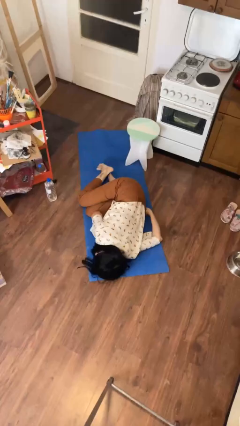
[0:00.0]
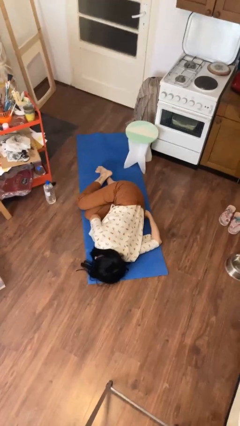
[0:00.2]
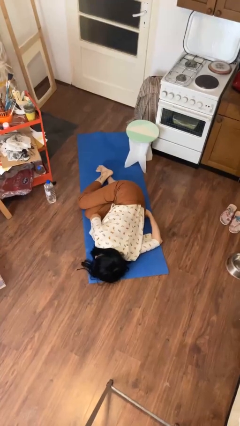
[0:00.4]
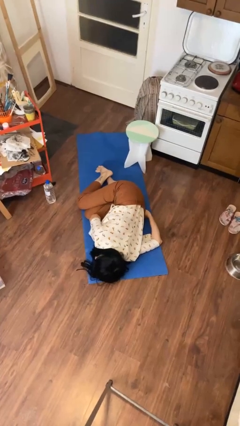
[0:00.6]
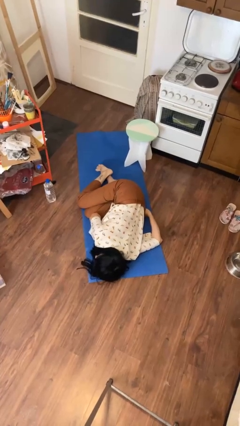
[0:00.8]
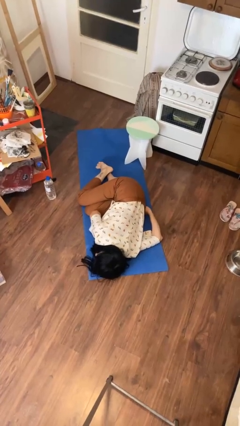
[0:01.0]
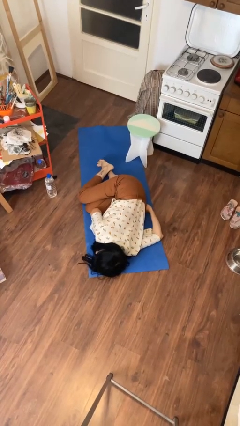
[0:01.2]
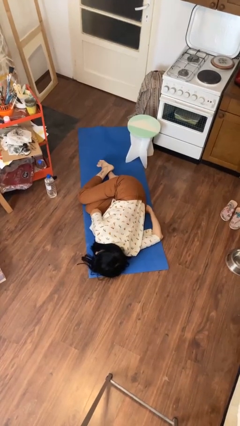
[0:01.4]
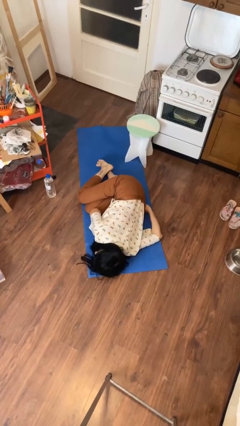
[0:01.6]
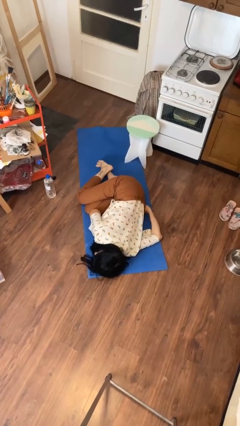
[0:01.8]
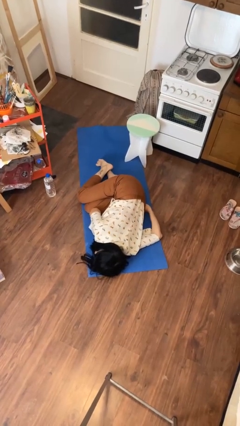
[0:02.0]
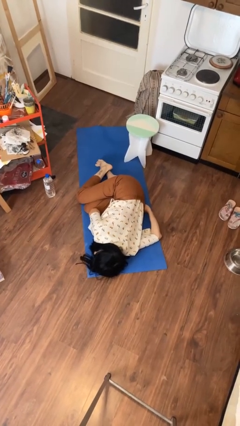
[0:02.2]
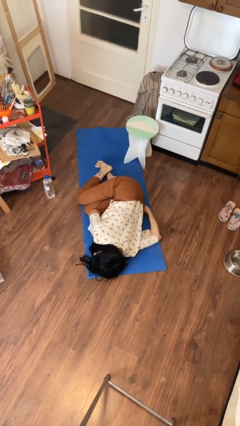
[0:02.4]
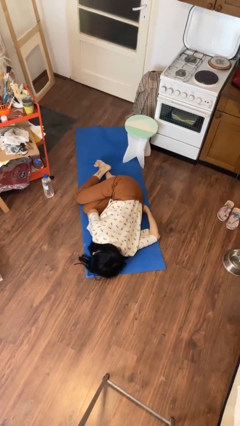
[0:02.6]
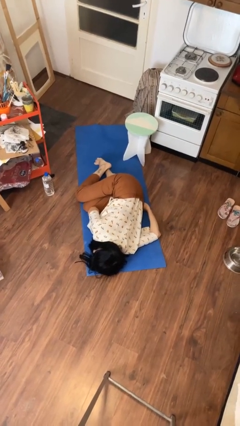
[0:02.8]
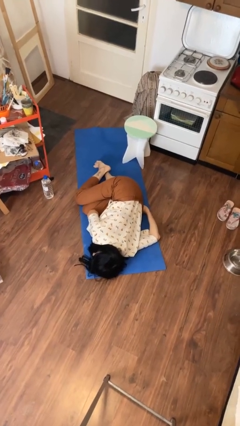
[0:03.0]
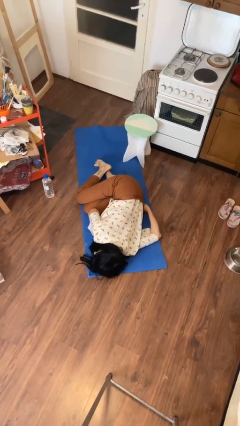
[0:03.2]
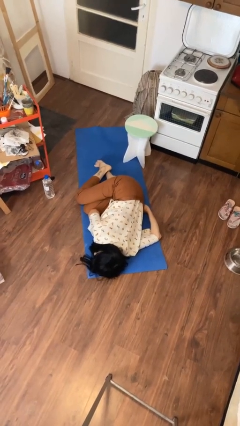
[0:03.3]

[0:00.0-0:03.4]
person lies down on floor

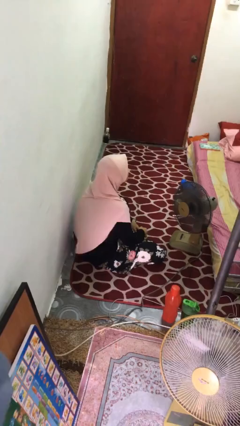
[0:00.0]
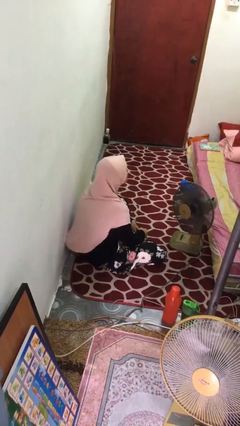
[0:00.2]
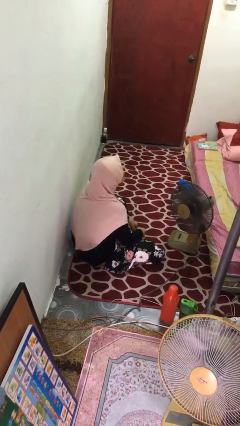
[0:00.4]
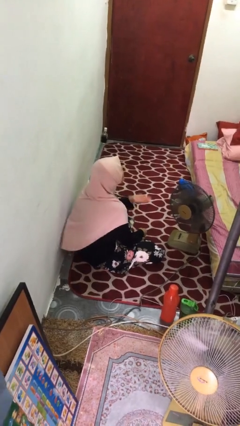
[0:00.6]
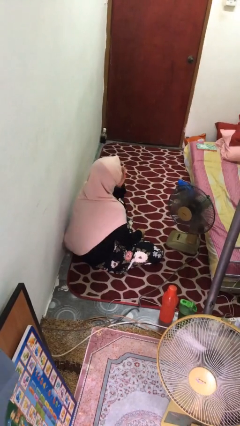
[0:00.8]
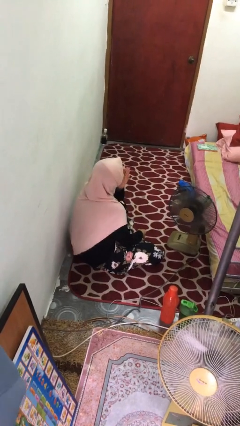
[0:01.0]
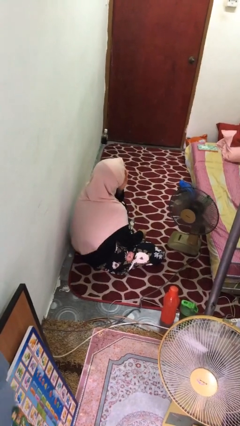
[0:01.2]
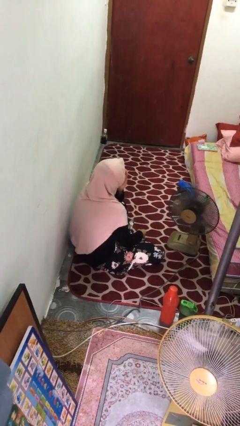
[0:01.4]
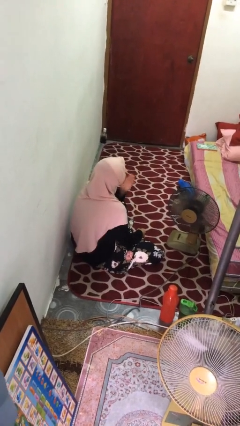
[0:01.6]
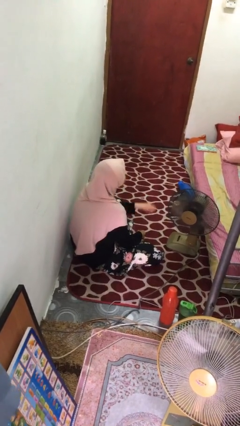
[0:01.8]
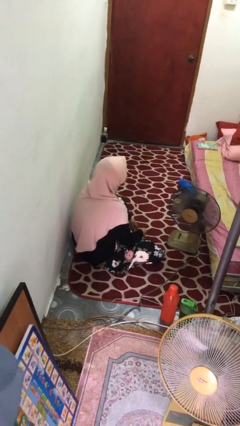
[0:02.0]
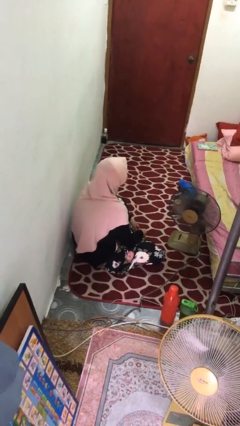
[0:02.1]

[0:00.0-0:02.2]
person yawns

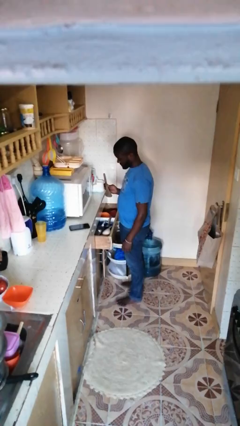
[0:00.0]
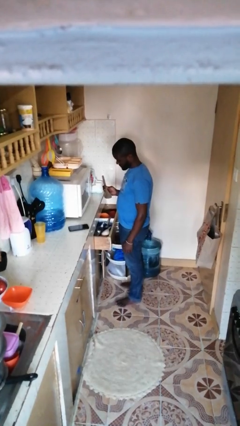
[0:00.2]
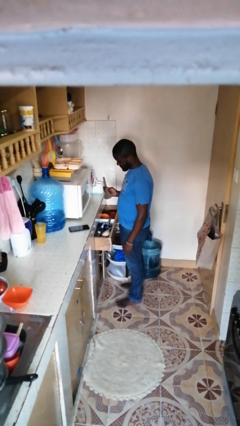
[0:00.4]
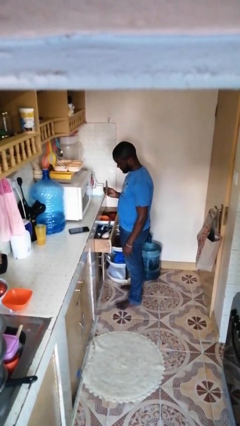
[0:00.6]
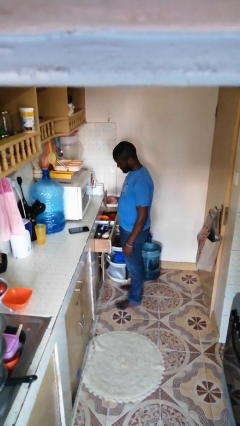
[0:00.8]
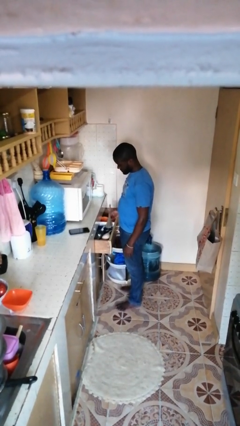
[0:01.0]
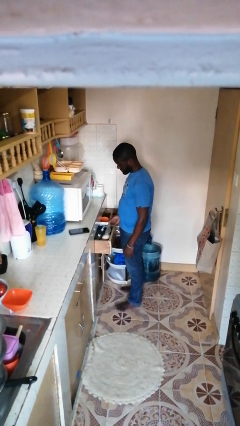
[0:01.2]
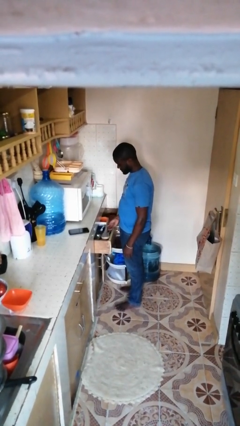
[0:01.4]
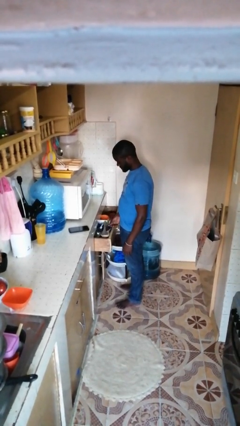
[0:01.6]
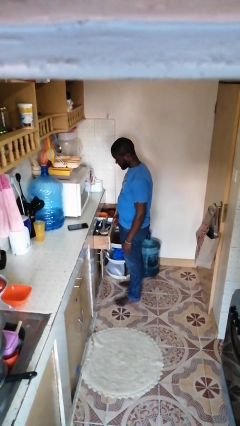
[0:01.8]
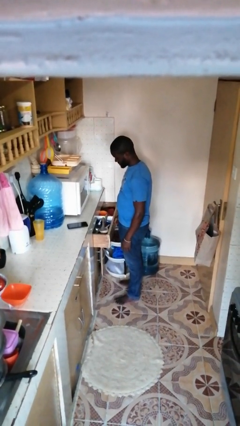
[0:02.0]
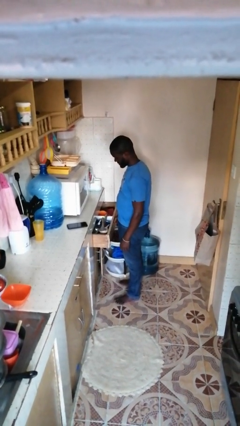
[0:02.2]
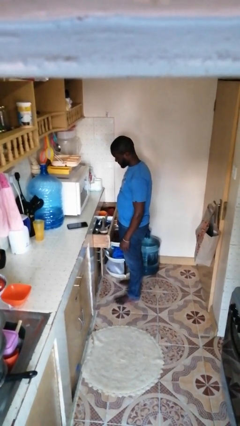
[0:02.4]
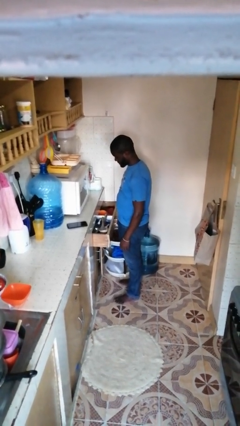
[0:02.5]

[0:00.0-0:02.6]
person puts object into kitchen drawer

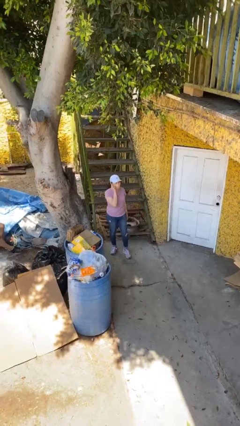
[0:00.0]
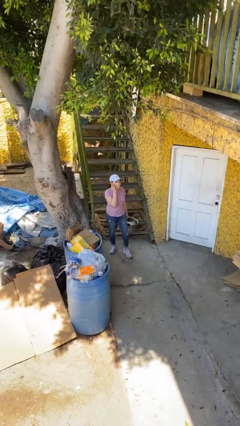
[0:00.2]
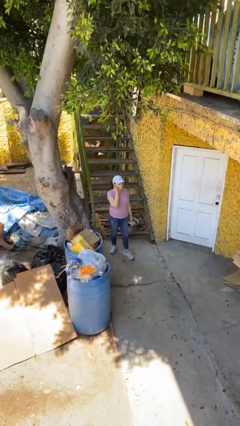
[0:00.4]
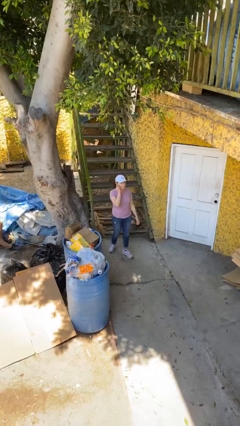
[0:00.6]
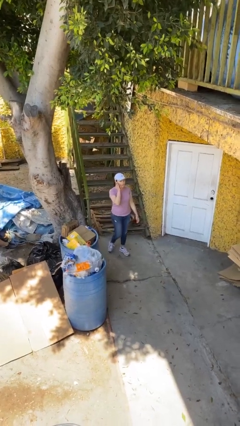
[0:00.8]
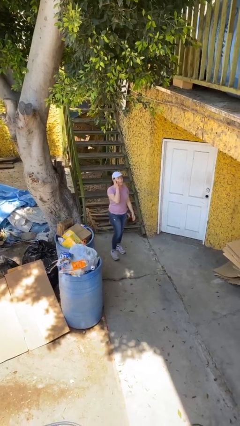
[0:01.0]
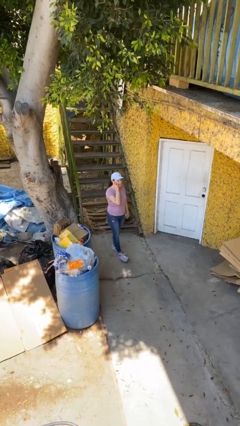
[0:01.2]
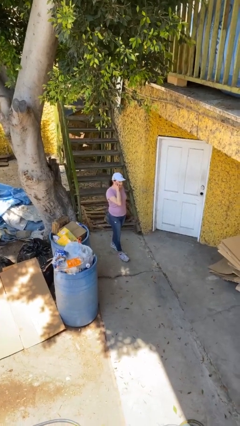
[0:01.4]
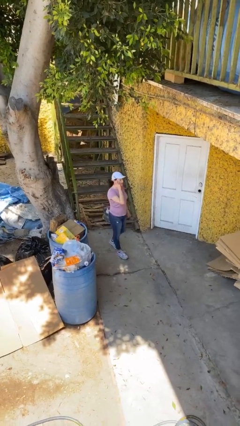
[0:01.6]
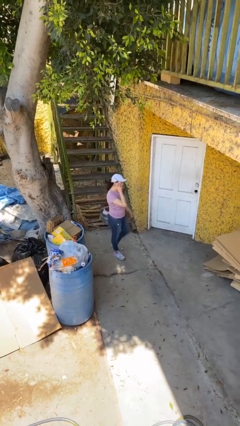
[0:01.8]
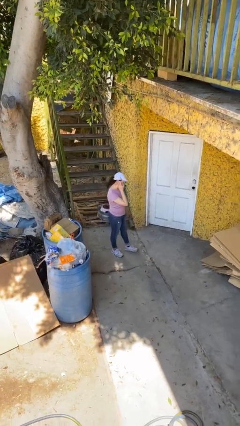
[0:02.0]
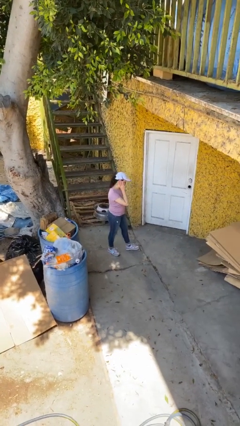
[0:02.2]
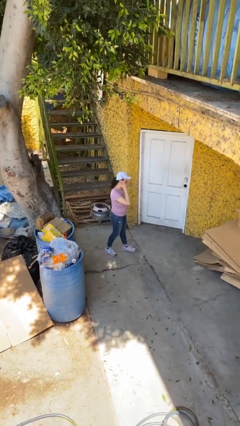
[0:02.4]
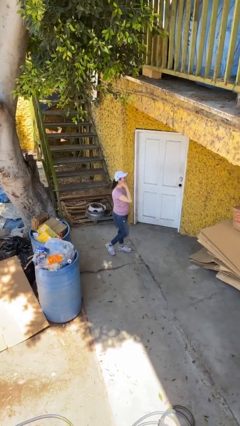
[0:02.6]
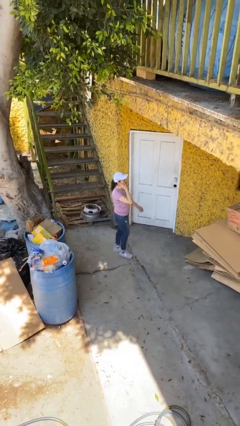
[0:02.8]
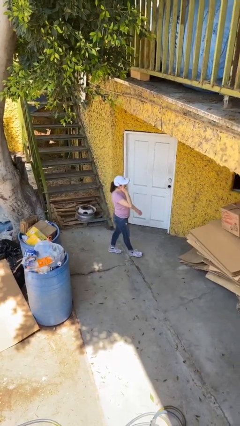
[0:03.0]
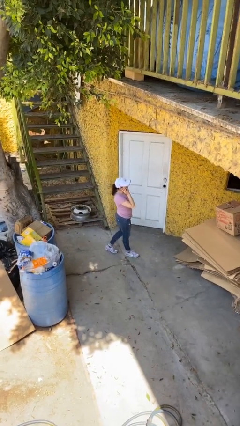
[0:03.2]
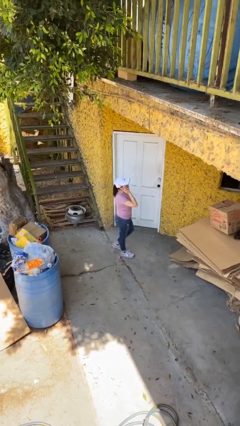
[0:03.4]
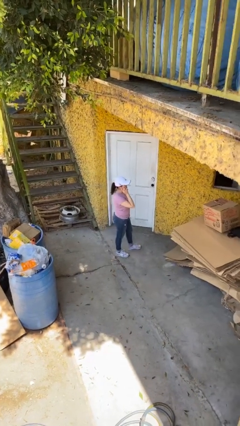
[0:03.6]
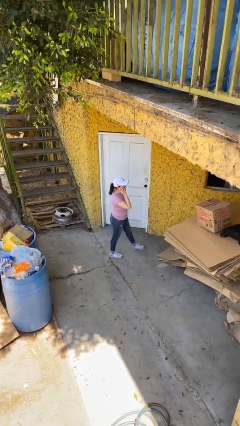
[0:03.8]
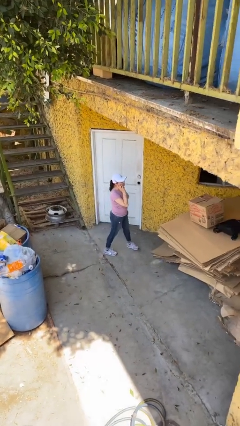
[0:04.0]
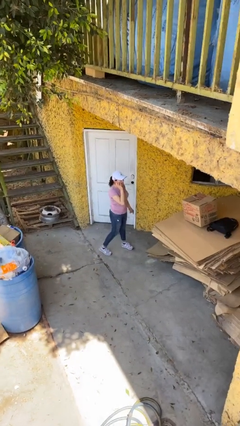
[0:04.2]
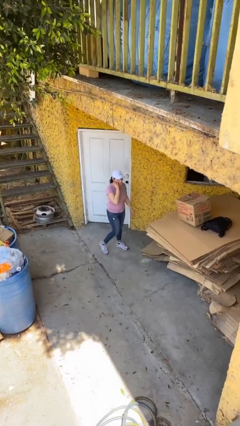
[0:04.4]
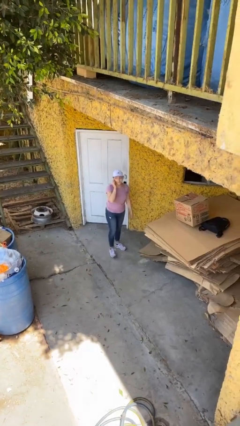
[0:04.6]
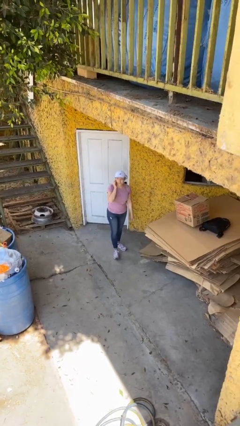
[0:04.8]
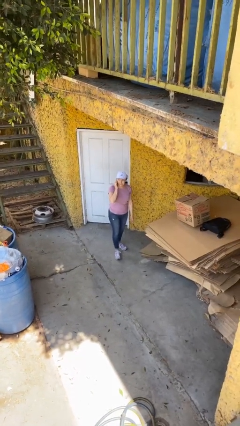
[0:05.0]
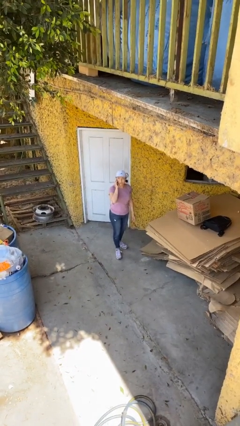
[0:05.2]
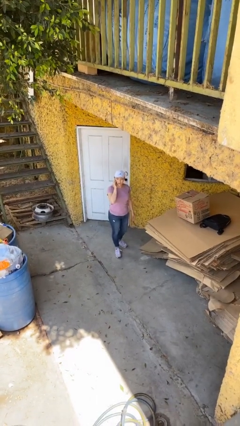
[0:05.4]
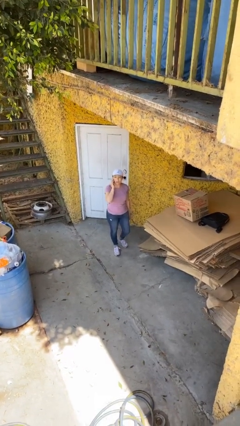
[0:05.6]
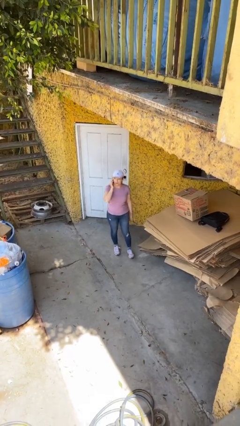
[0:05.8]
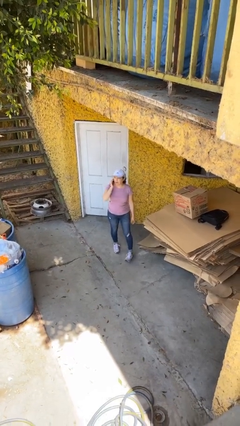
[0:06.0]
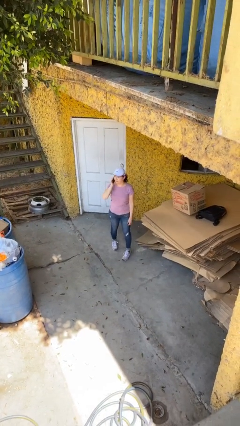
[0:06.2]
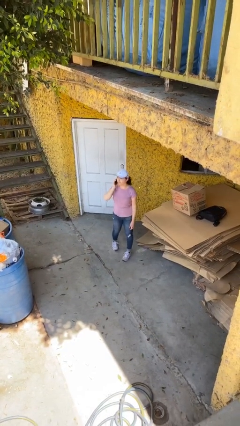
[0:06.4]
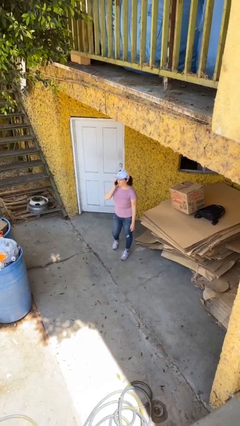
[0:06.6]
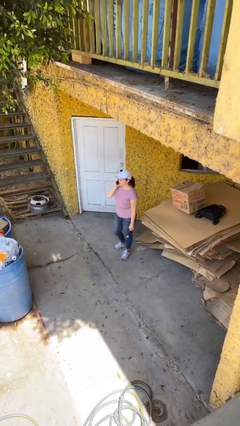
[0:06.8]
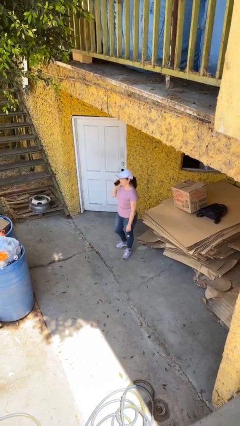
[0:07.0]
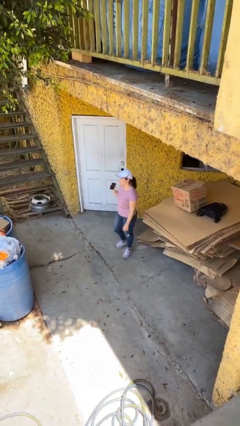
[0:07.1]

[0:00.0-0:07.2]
person talks on phone

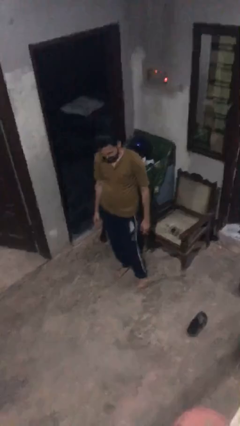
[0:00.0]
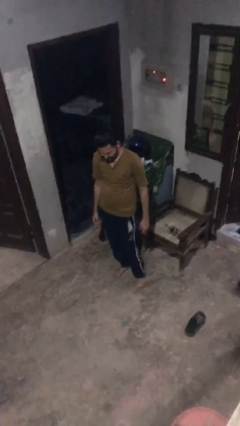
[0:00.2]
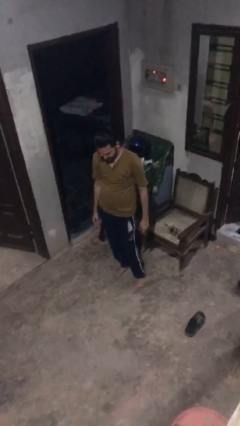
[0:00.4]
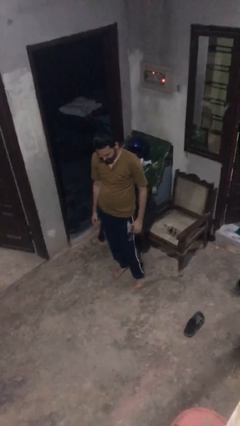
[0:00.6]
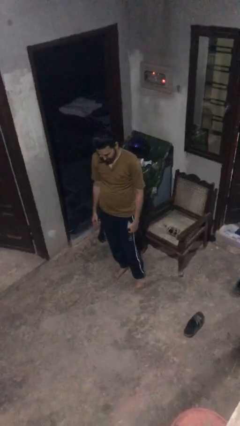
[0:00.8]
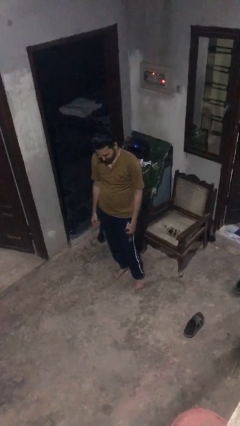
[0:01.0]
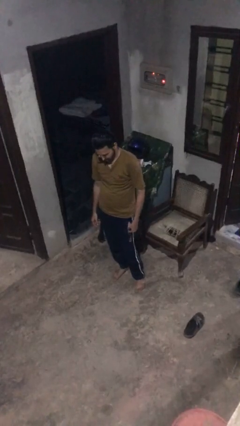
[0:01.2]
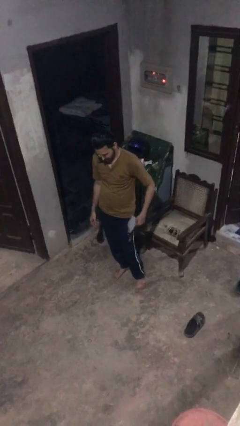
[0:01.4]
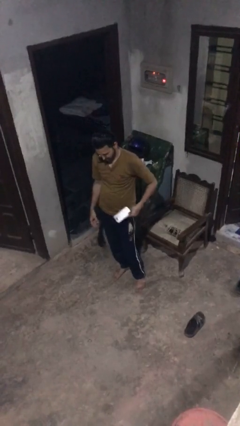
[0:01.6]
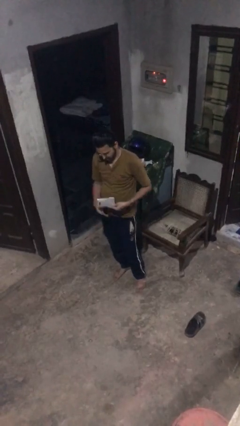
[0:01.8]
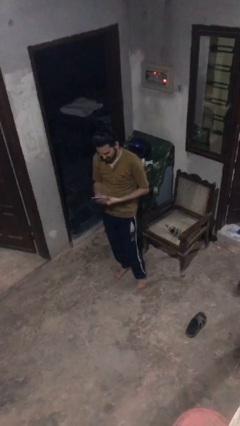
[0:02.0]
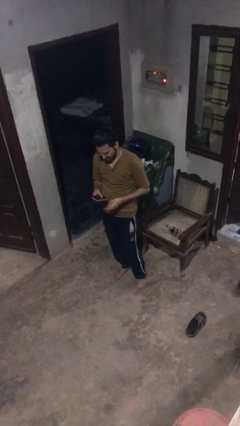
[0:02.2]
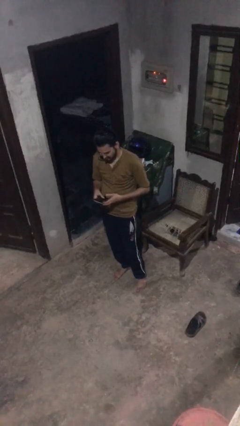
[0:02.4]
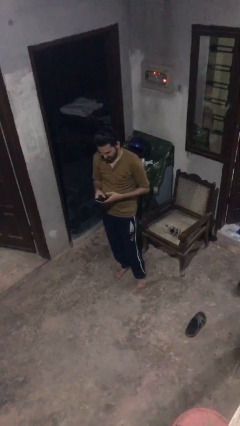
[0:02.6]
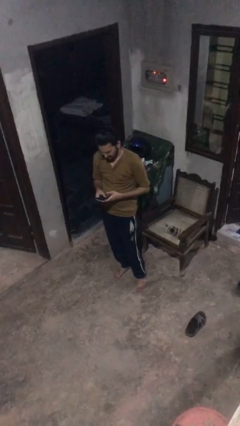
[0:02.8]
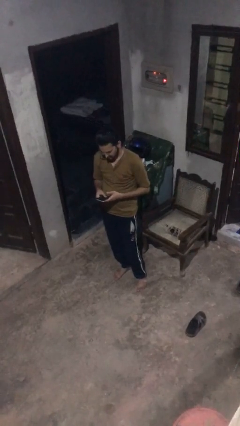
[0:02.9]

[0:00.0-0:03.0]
person takes phone from pocket
